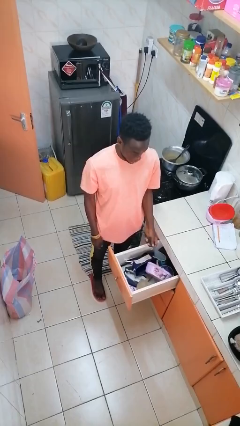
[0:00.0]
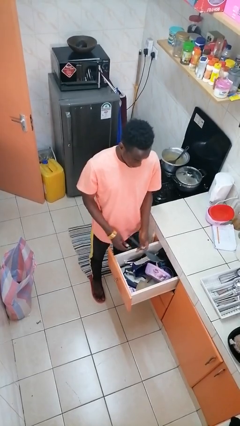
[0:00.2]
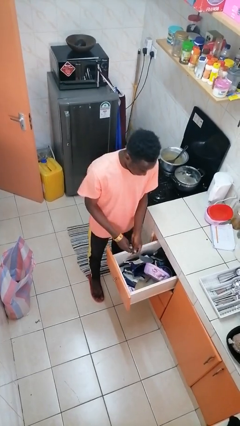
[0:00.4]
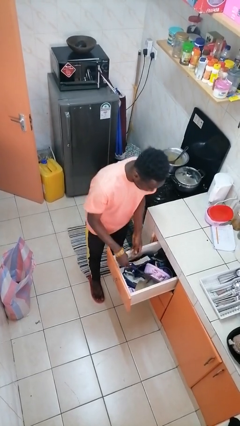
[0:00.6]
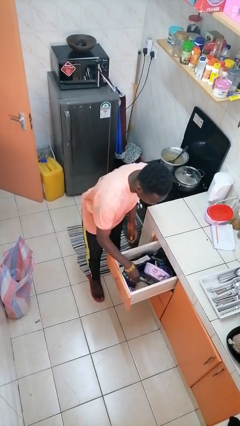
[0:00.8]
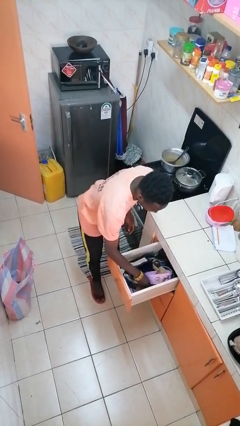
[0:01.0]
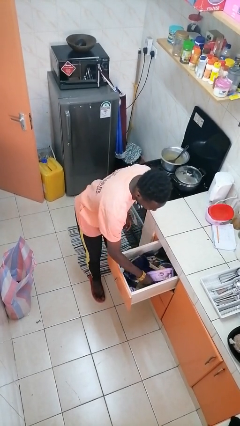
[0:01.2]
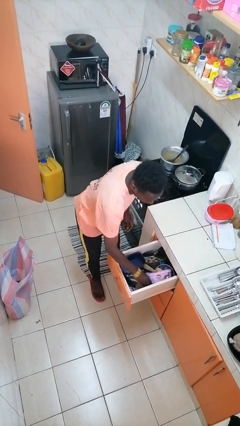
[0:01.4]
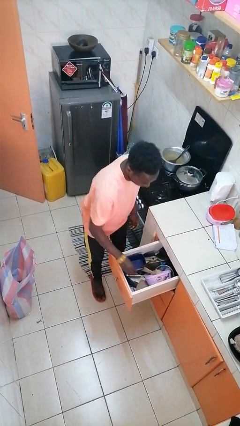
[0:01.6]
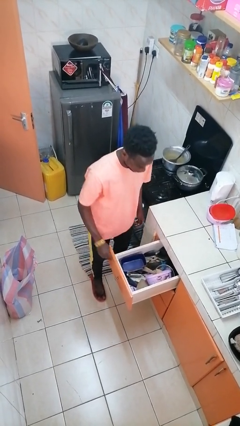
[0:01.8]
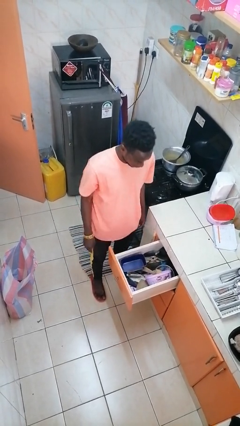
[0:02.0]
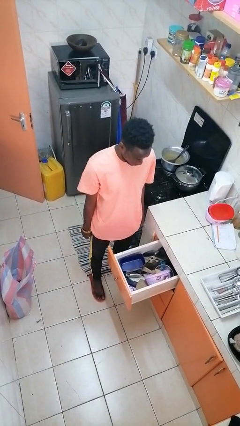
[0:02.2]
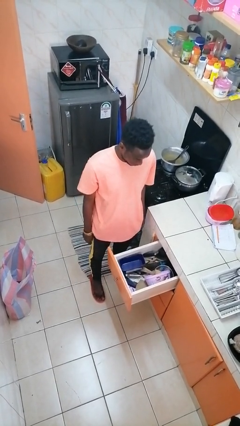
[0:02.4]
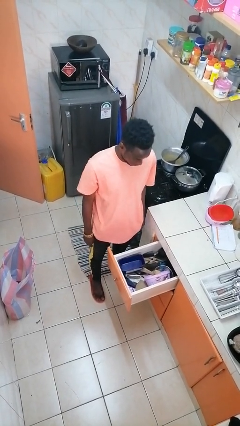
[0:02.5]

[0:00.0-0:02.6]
person puts object into kitchen drawer

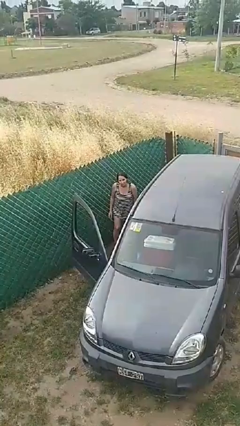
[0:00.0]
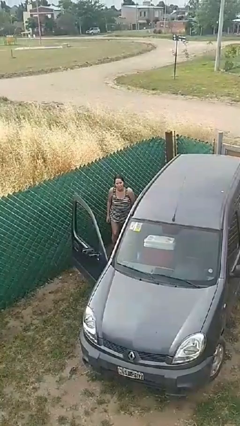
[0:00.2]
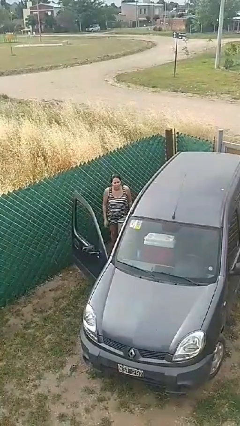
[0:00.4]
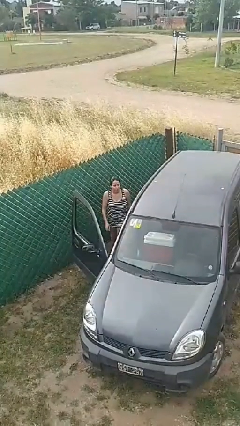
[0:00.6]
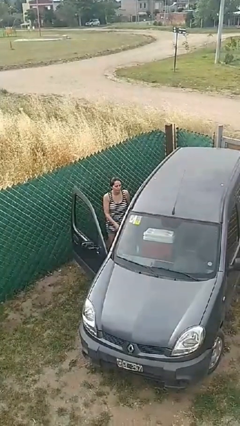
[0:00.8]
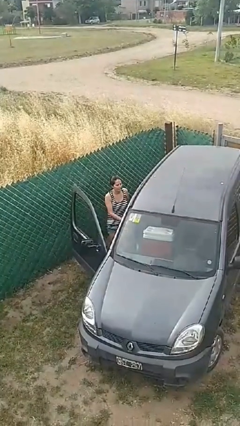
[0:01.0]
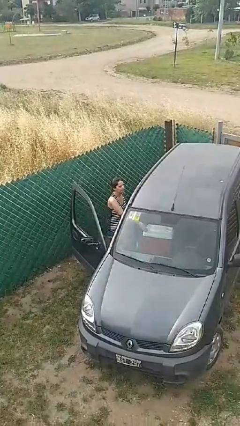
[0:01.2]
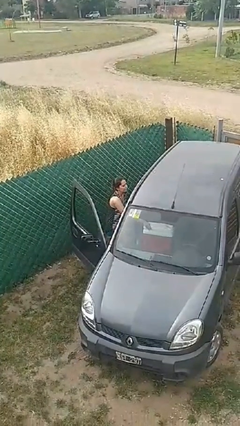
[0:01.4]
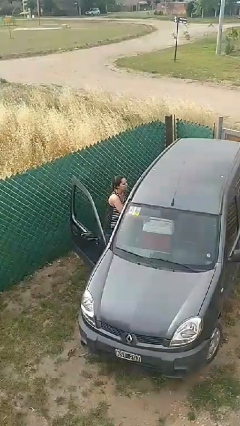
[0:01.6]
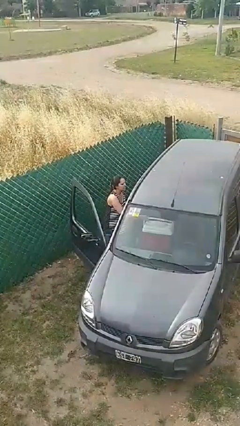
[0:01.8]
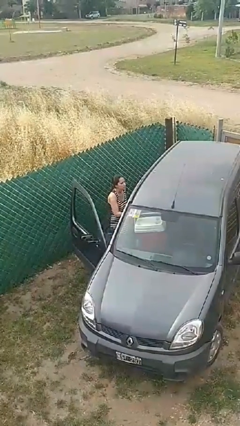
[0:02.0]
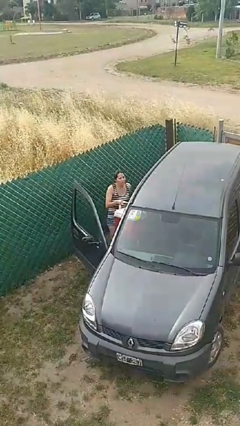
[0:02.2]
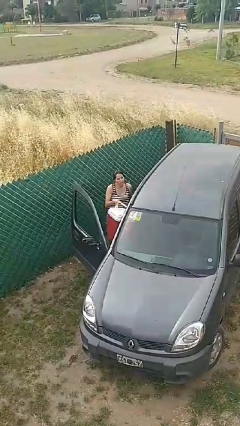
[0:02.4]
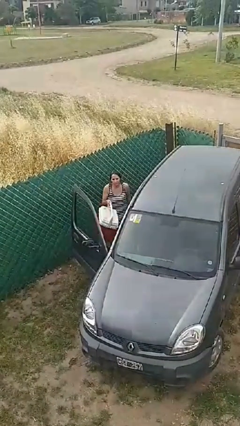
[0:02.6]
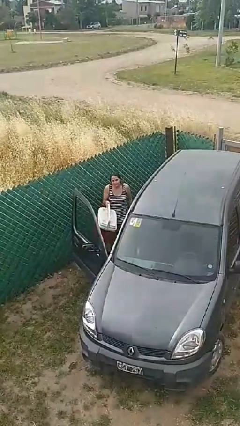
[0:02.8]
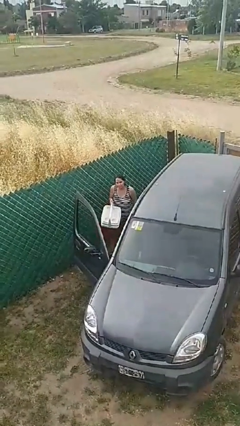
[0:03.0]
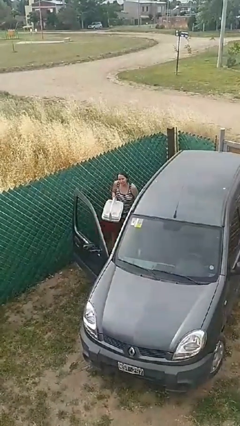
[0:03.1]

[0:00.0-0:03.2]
person unloads car

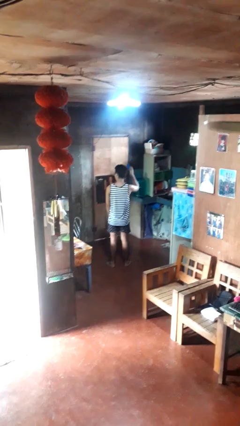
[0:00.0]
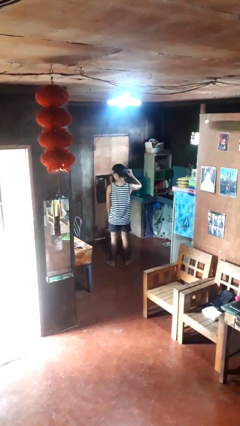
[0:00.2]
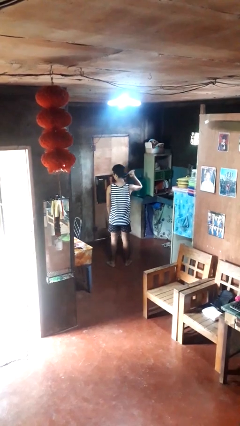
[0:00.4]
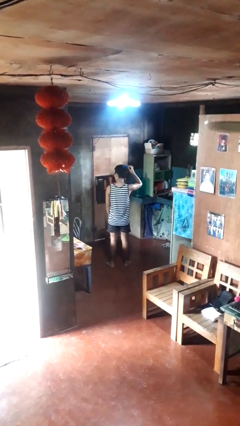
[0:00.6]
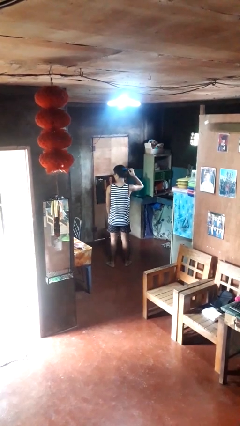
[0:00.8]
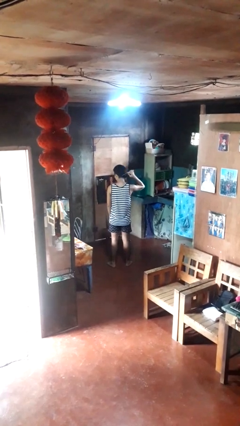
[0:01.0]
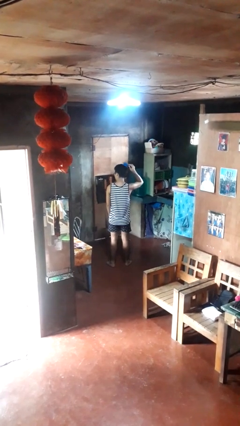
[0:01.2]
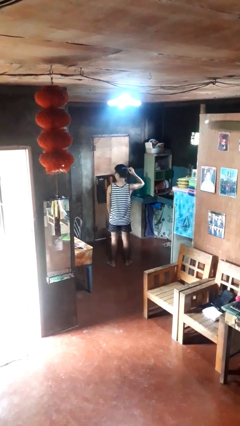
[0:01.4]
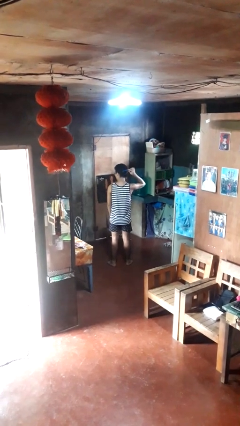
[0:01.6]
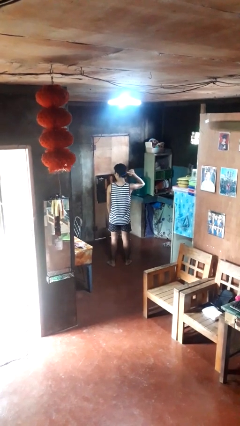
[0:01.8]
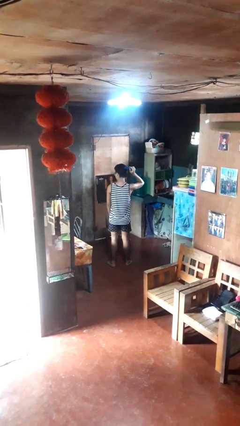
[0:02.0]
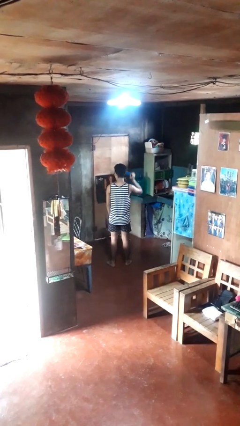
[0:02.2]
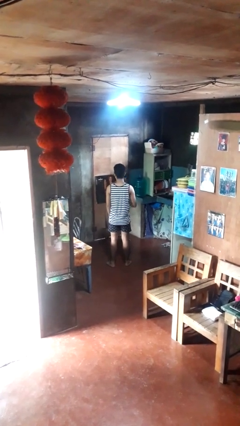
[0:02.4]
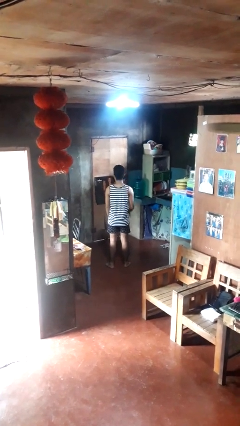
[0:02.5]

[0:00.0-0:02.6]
person brushes hair

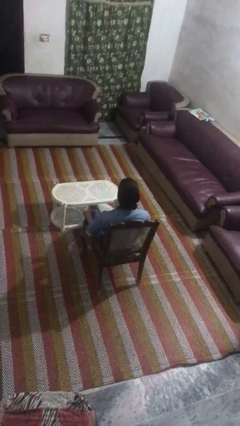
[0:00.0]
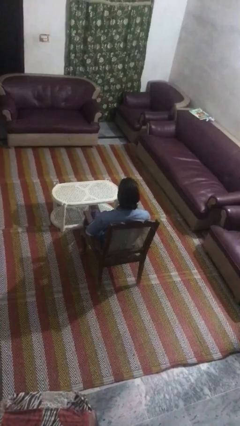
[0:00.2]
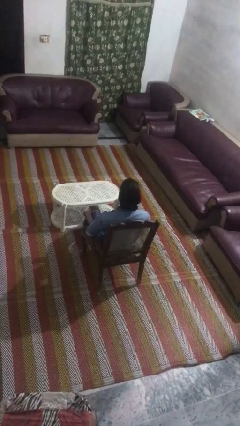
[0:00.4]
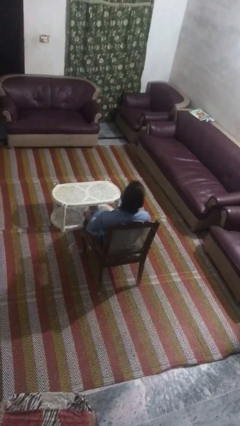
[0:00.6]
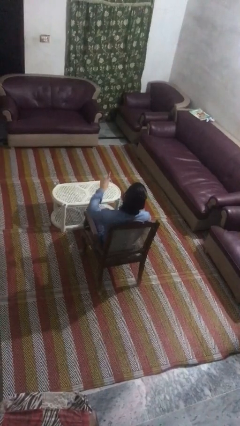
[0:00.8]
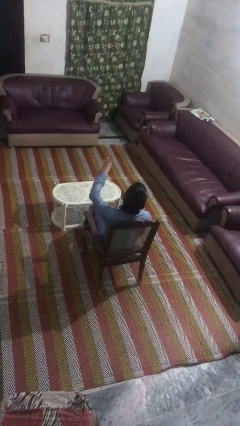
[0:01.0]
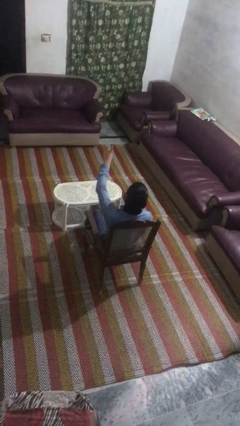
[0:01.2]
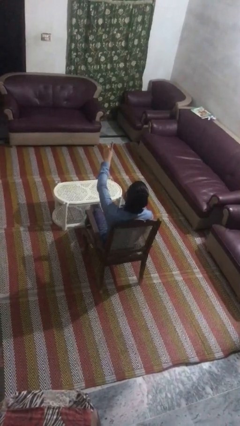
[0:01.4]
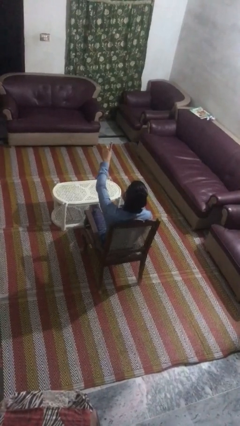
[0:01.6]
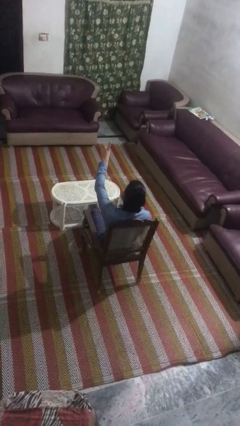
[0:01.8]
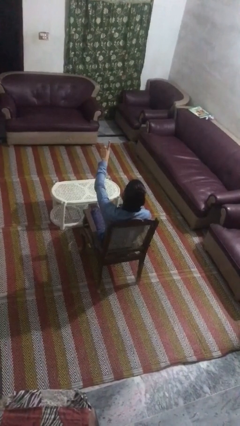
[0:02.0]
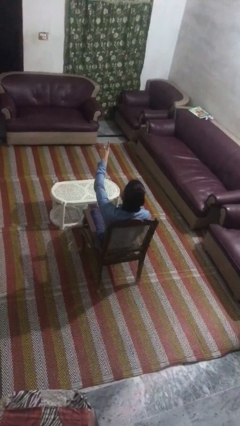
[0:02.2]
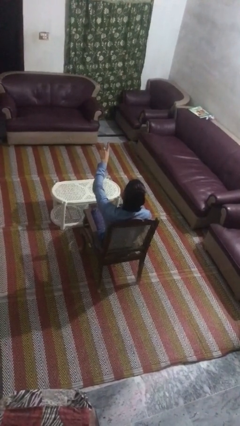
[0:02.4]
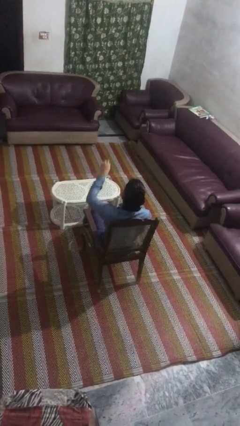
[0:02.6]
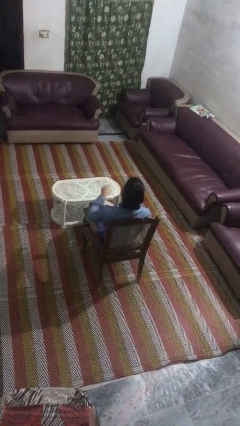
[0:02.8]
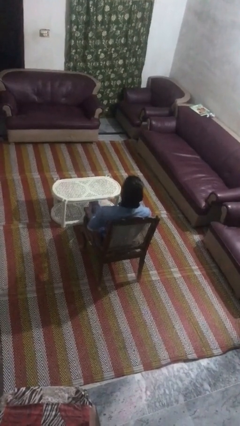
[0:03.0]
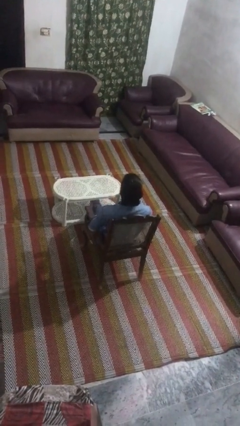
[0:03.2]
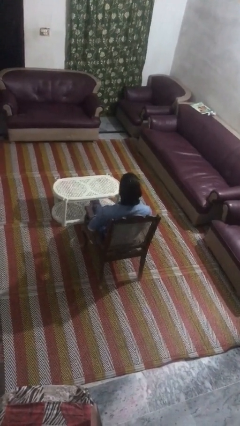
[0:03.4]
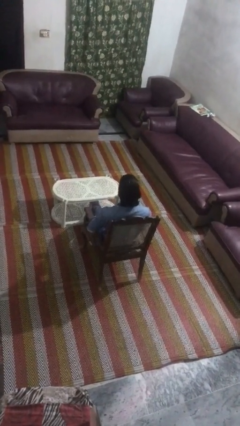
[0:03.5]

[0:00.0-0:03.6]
person gestures number one

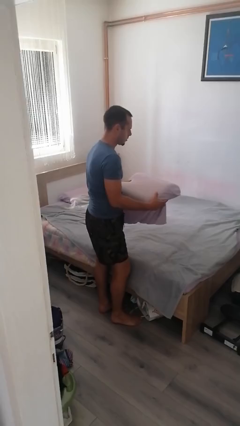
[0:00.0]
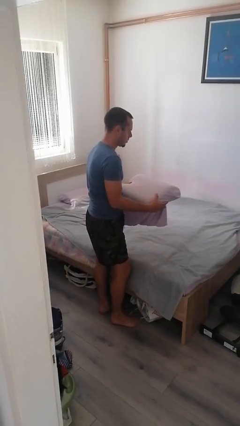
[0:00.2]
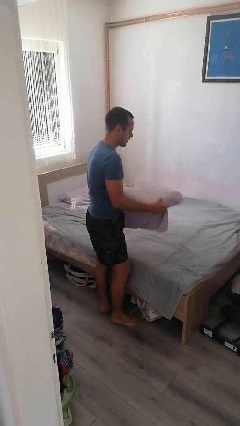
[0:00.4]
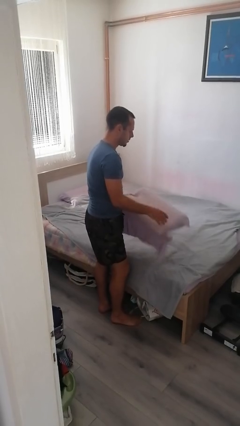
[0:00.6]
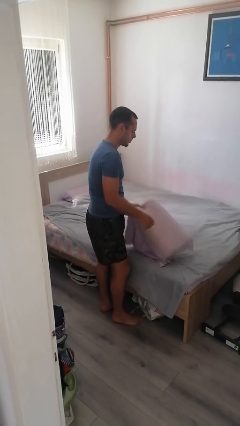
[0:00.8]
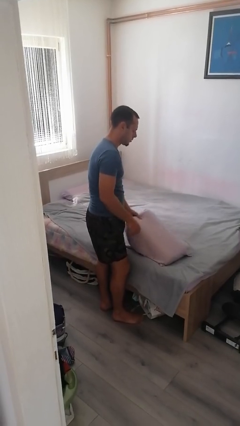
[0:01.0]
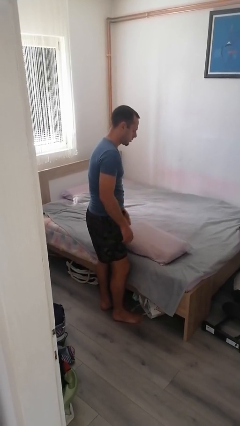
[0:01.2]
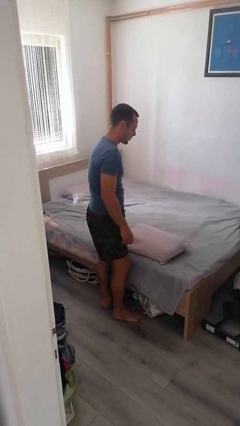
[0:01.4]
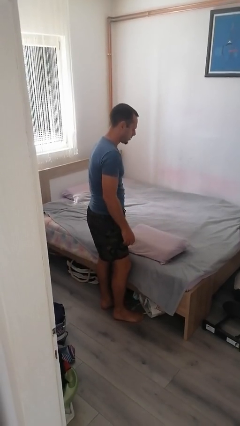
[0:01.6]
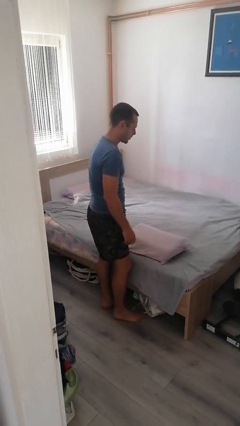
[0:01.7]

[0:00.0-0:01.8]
person puts down object on bed

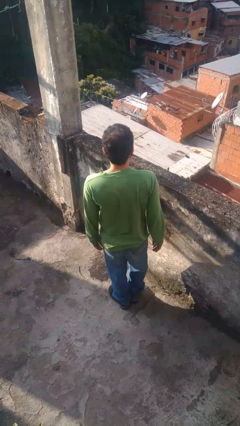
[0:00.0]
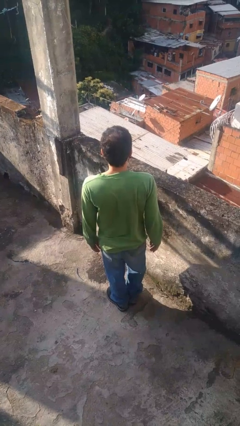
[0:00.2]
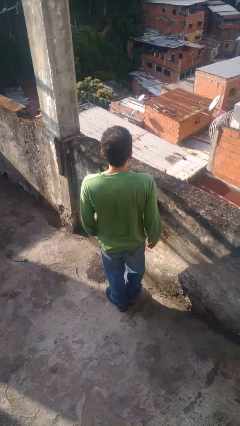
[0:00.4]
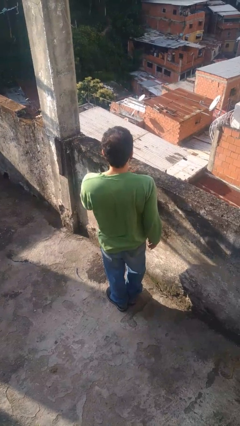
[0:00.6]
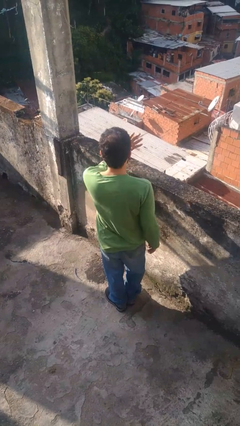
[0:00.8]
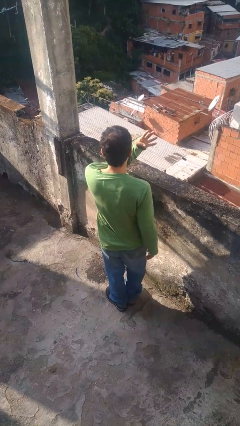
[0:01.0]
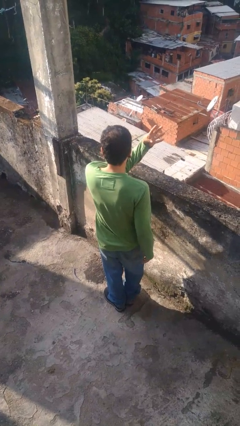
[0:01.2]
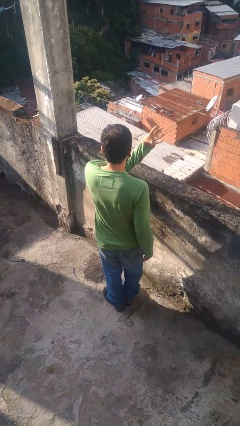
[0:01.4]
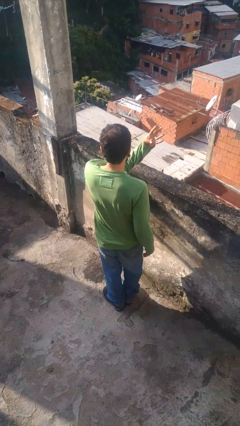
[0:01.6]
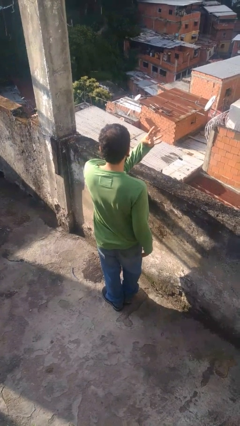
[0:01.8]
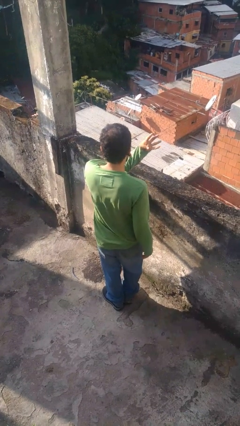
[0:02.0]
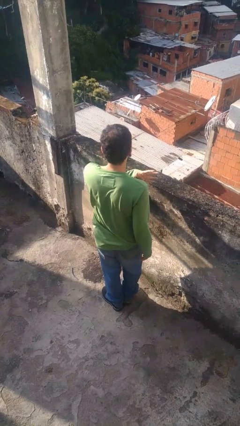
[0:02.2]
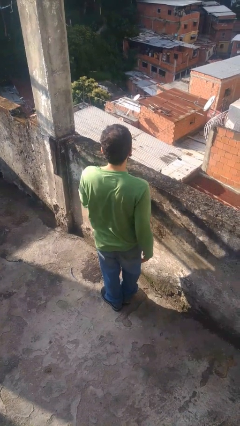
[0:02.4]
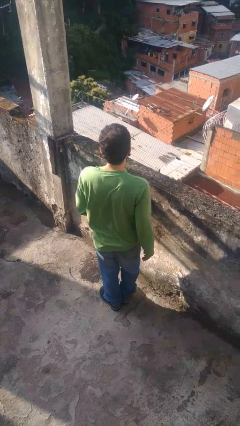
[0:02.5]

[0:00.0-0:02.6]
person gestures number four

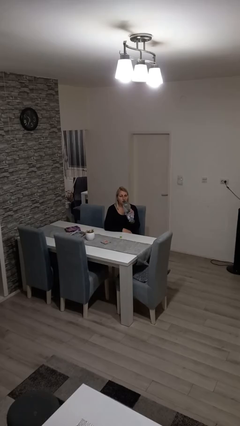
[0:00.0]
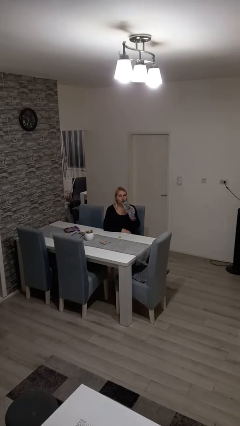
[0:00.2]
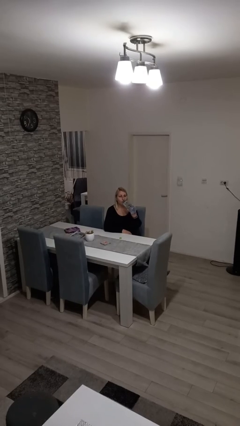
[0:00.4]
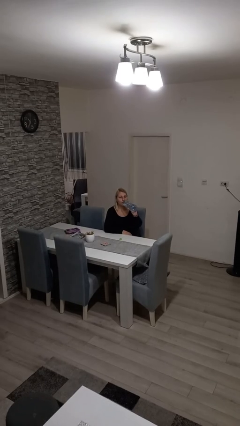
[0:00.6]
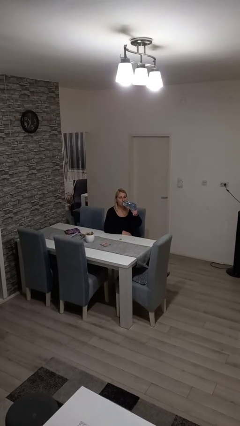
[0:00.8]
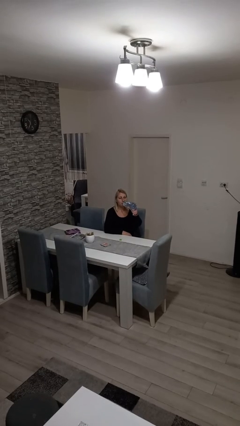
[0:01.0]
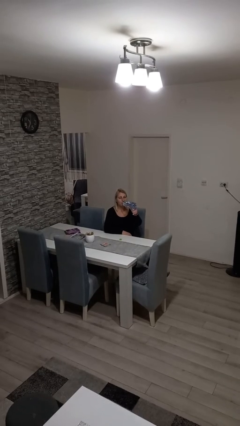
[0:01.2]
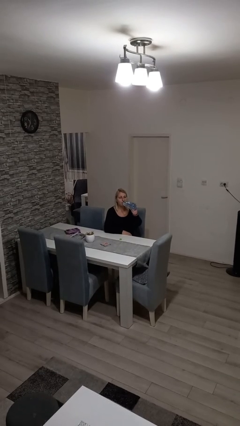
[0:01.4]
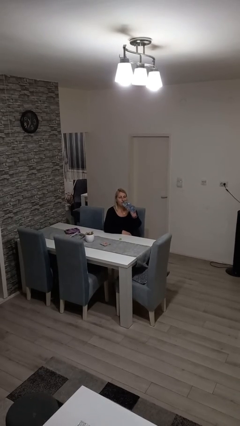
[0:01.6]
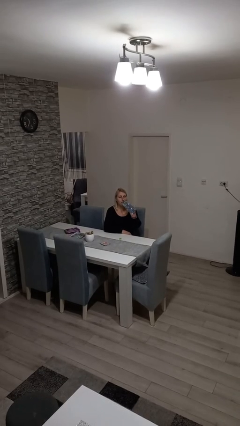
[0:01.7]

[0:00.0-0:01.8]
person drinks from bottle
